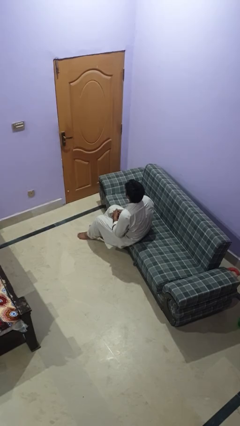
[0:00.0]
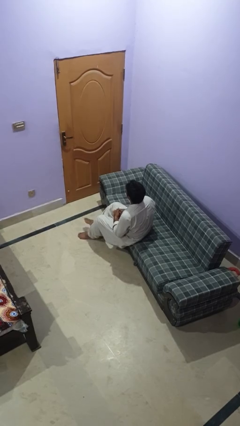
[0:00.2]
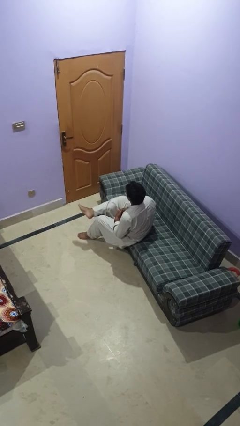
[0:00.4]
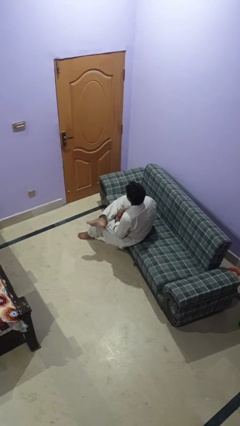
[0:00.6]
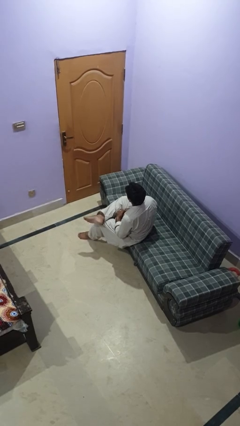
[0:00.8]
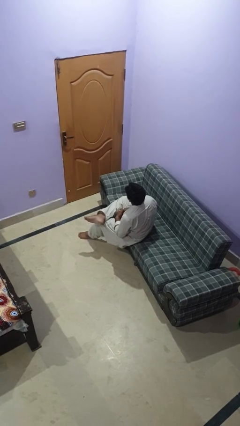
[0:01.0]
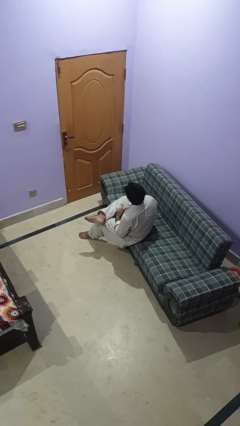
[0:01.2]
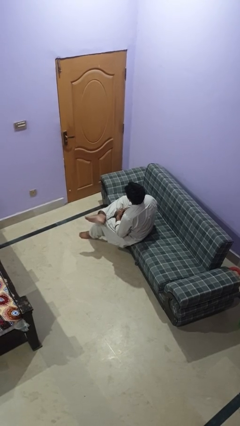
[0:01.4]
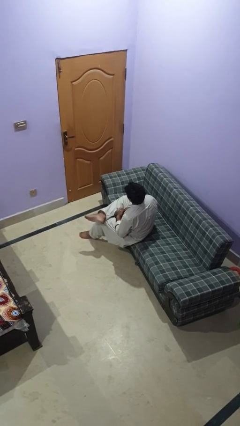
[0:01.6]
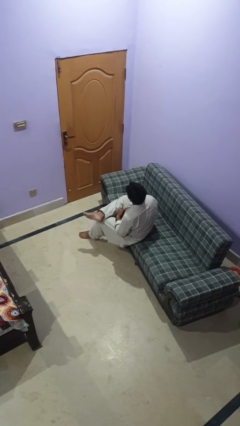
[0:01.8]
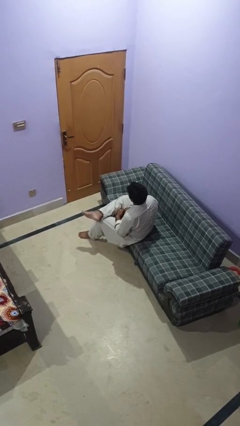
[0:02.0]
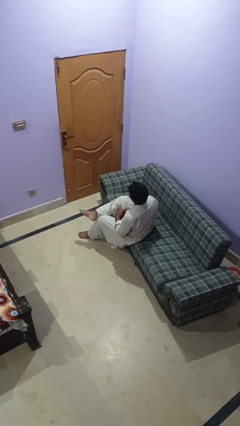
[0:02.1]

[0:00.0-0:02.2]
person crosses legs

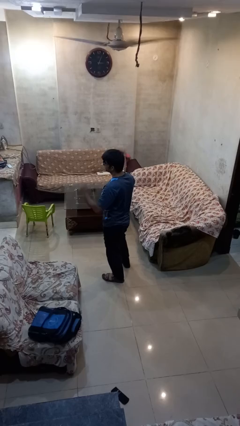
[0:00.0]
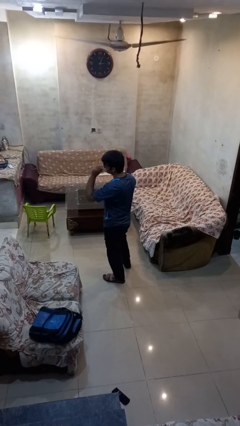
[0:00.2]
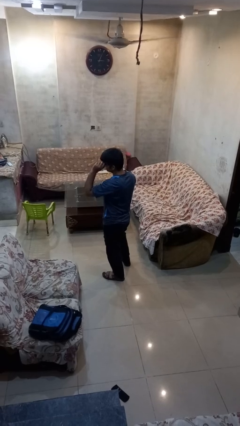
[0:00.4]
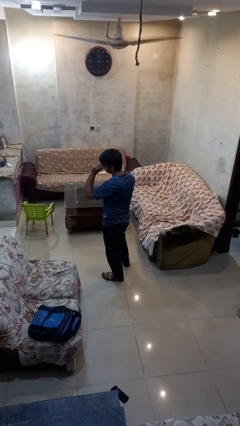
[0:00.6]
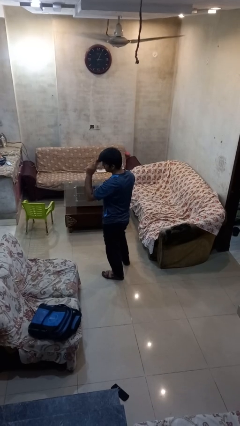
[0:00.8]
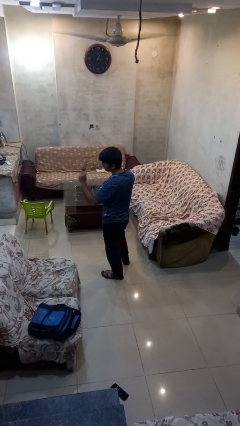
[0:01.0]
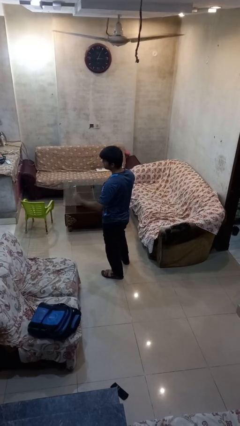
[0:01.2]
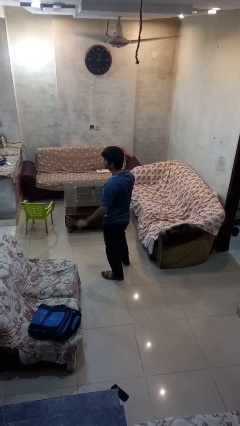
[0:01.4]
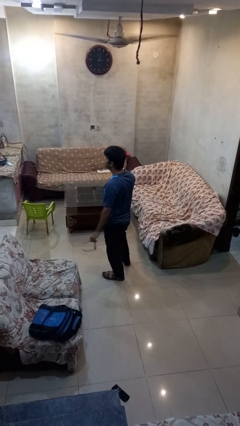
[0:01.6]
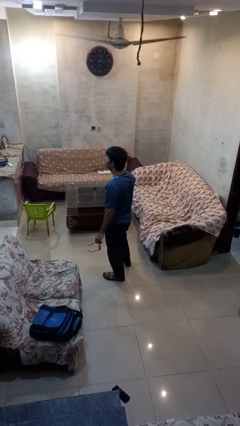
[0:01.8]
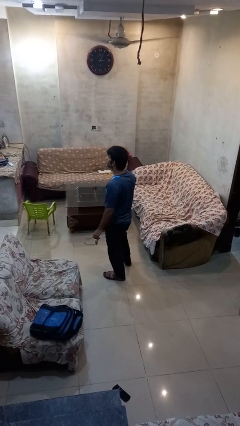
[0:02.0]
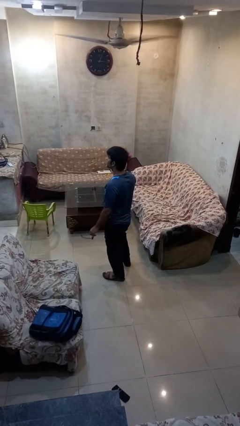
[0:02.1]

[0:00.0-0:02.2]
person takes off sunglasses

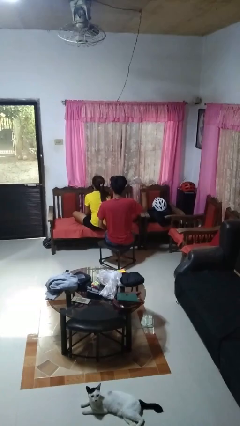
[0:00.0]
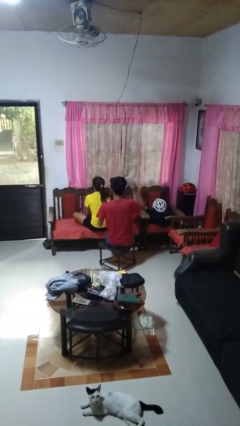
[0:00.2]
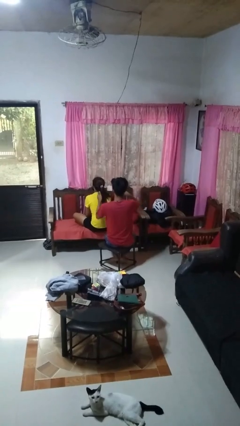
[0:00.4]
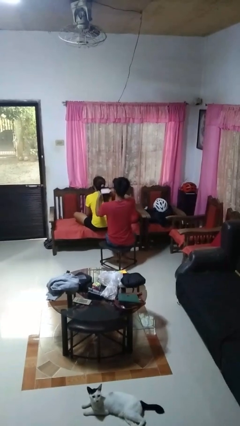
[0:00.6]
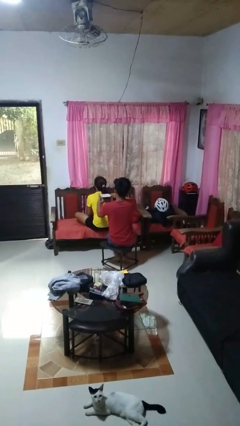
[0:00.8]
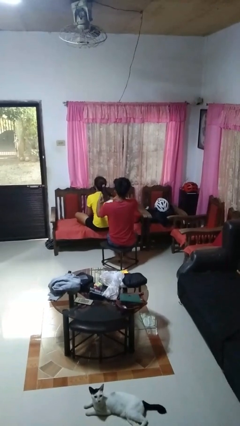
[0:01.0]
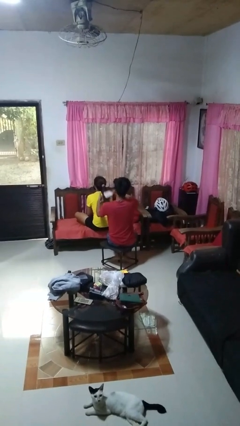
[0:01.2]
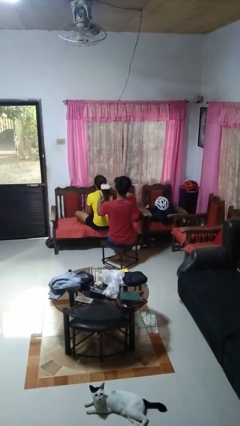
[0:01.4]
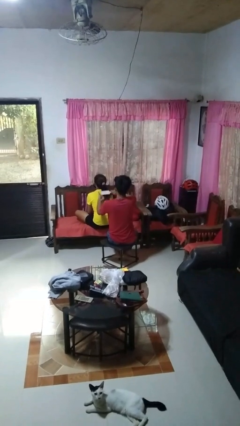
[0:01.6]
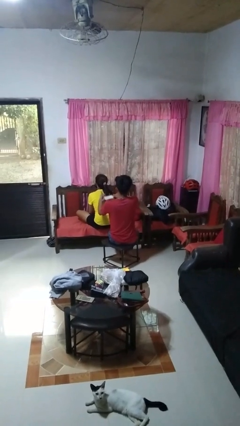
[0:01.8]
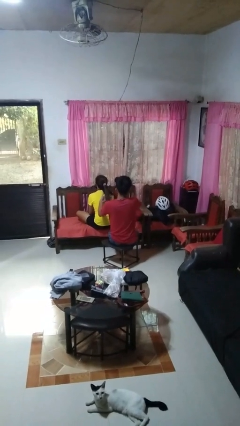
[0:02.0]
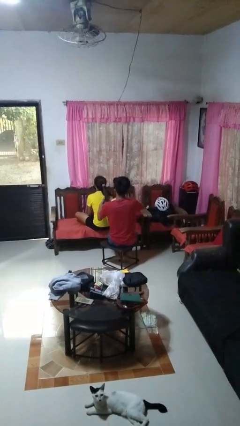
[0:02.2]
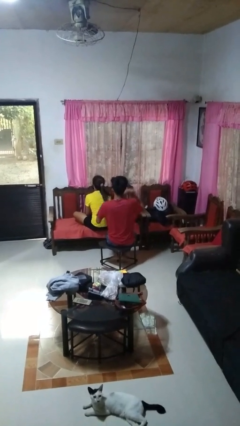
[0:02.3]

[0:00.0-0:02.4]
person brushes hair of person

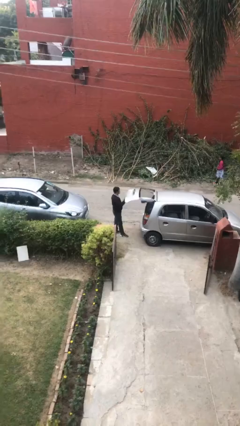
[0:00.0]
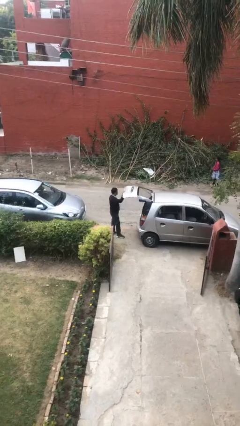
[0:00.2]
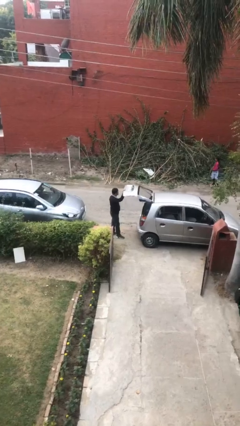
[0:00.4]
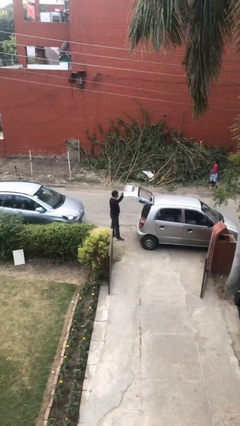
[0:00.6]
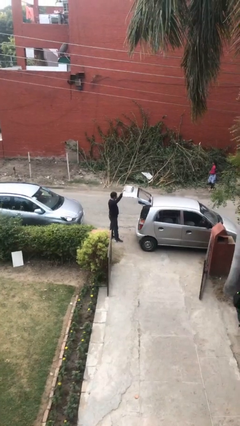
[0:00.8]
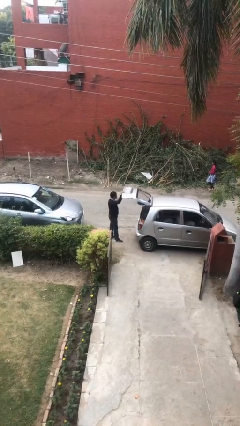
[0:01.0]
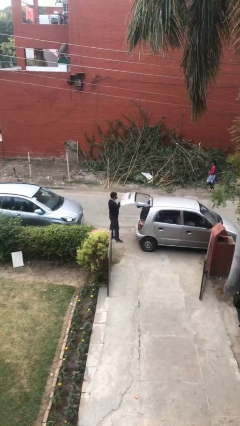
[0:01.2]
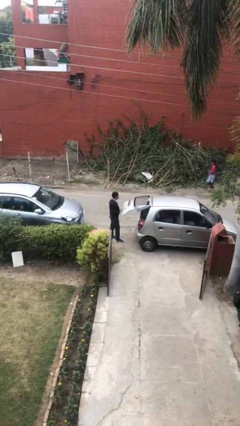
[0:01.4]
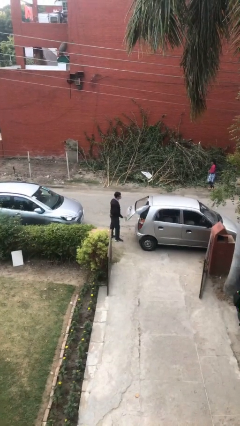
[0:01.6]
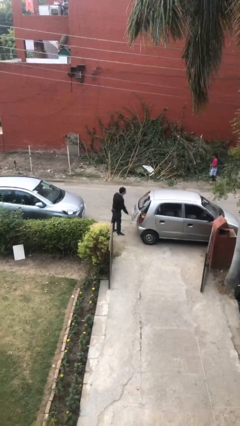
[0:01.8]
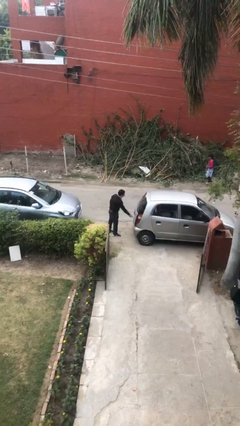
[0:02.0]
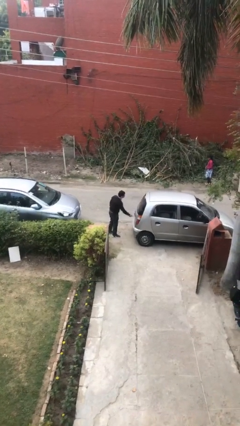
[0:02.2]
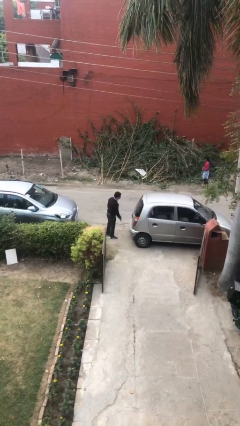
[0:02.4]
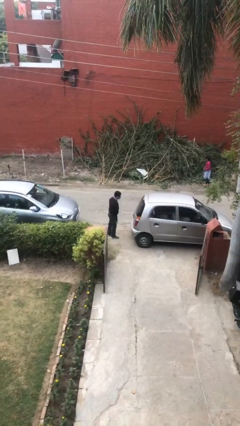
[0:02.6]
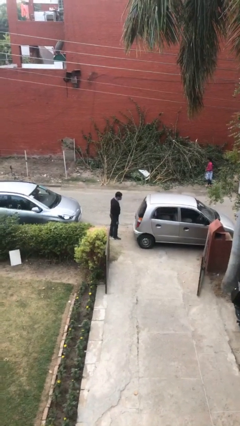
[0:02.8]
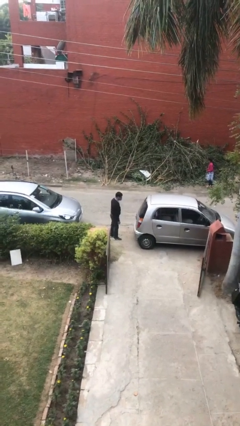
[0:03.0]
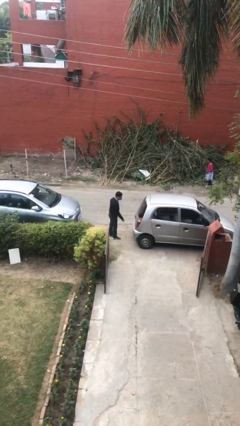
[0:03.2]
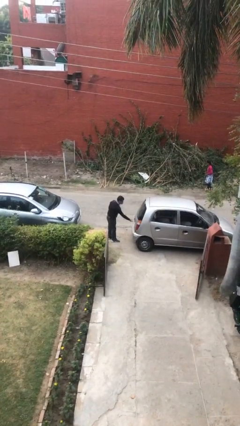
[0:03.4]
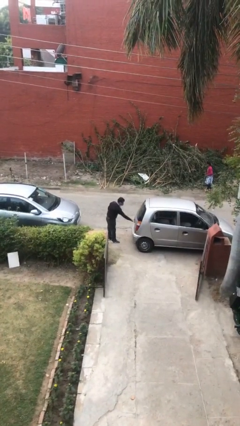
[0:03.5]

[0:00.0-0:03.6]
person closes car trunk

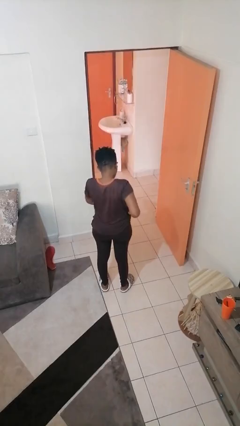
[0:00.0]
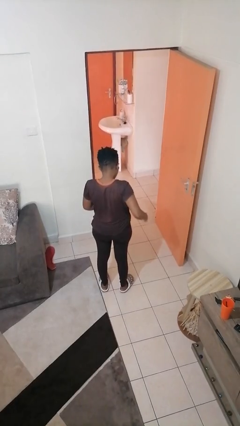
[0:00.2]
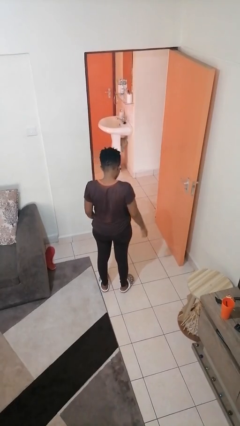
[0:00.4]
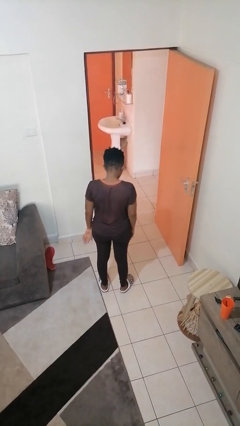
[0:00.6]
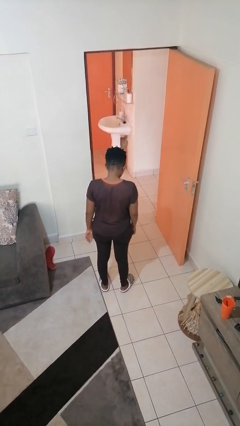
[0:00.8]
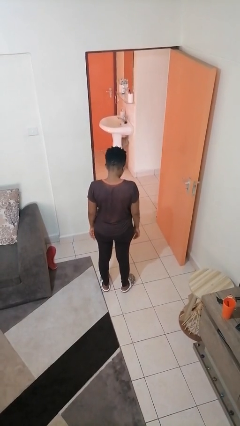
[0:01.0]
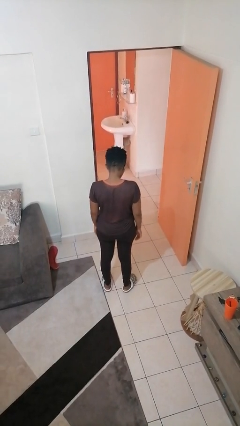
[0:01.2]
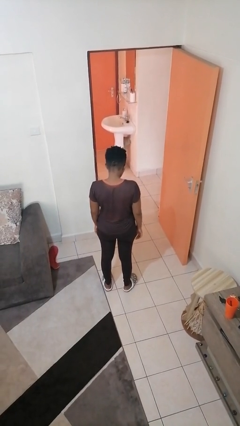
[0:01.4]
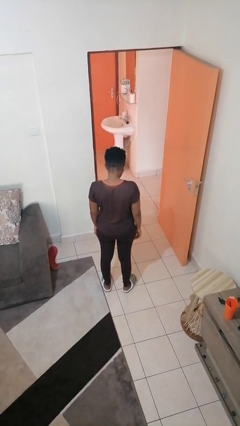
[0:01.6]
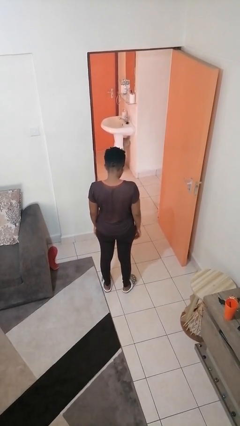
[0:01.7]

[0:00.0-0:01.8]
person puts phone into pocket

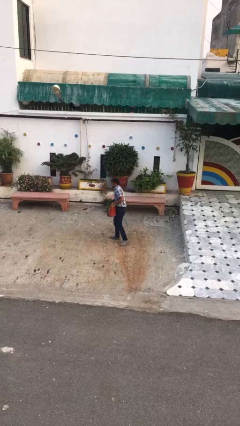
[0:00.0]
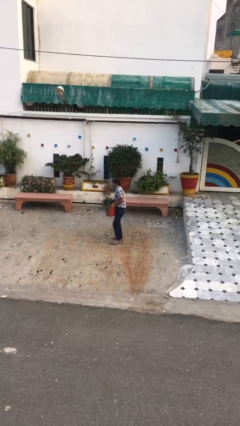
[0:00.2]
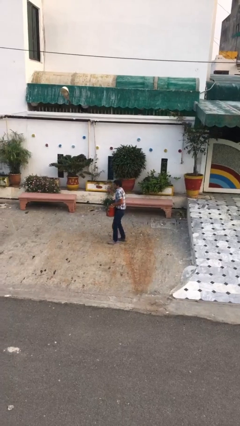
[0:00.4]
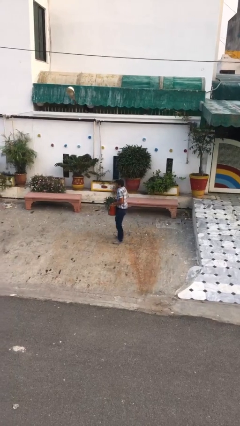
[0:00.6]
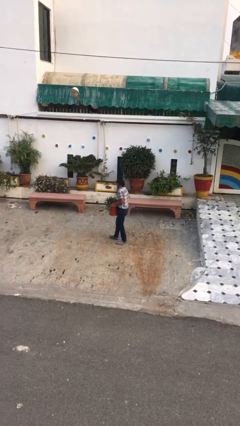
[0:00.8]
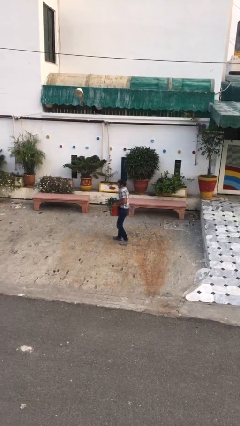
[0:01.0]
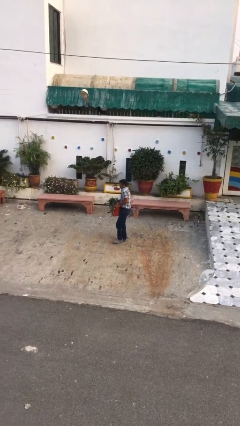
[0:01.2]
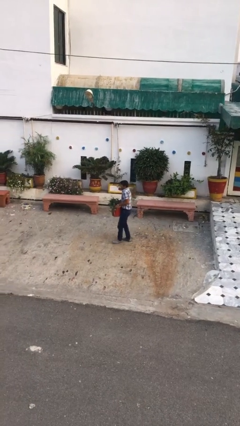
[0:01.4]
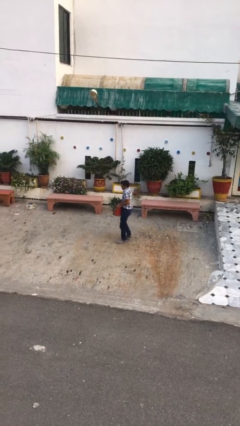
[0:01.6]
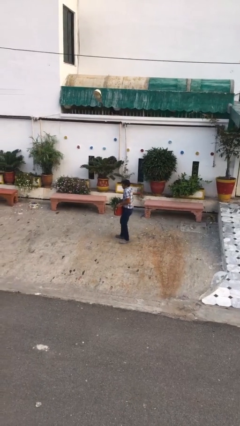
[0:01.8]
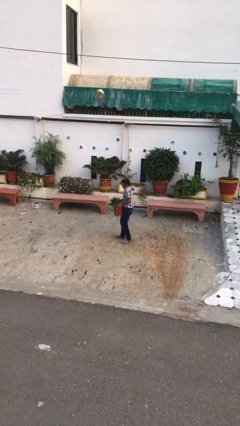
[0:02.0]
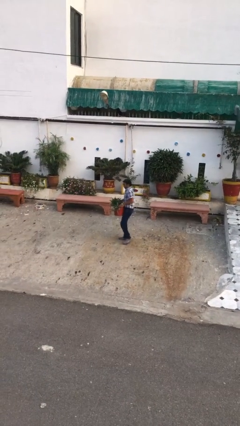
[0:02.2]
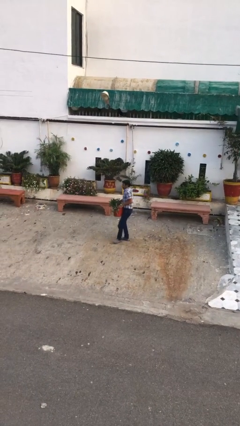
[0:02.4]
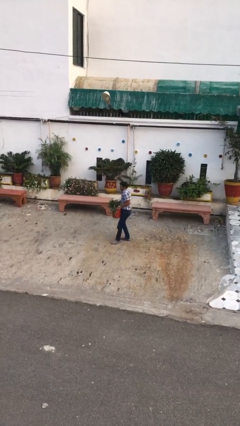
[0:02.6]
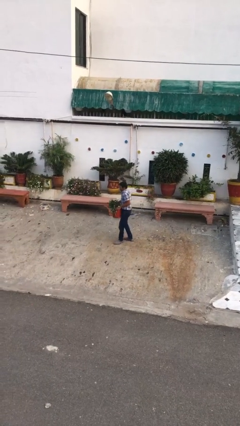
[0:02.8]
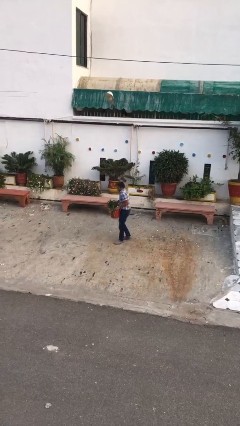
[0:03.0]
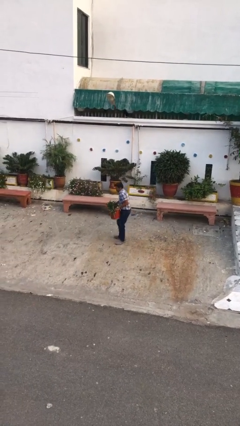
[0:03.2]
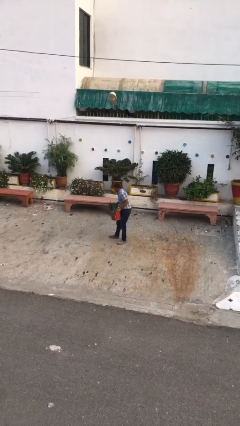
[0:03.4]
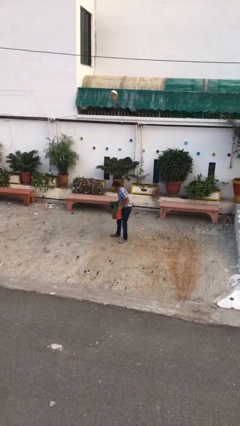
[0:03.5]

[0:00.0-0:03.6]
person carries heavy object

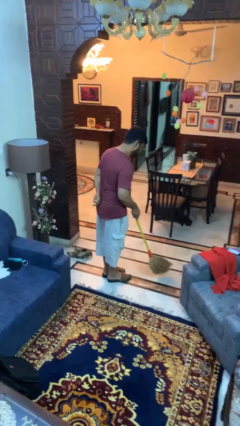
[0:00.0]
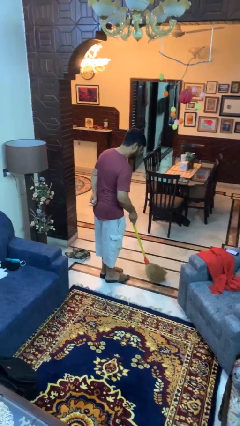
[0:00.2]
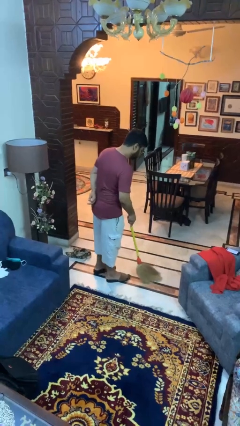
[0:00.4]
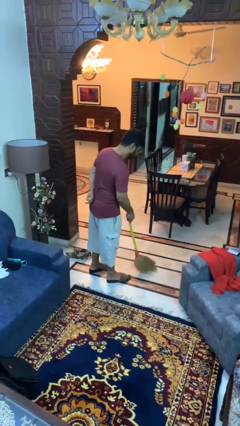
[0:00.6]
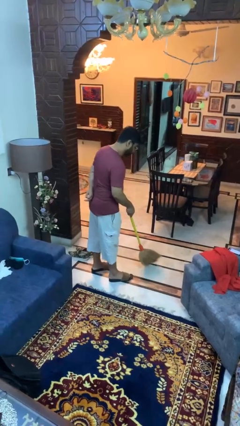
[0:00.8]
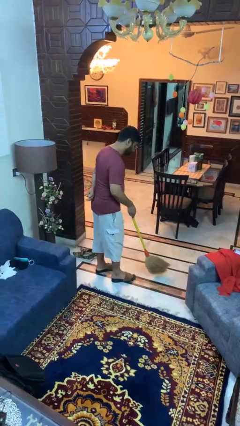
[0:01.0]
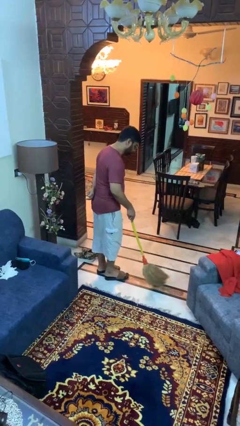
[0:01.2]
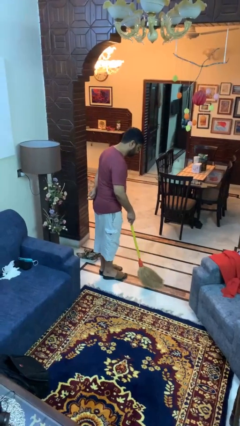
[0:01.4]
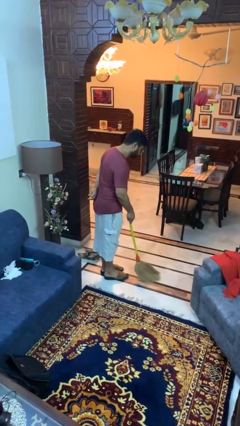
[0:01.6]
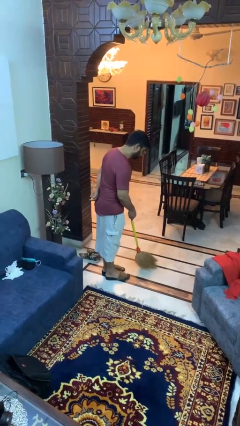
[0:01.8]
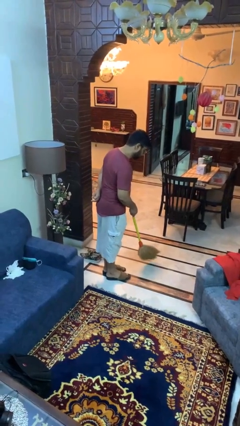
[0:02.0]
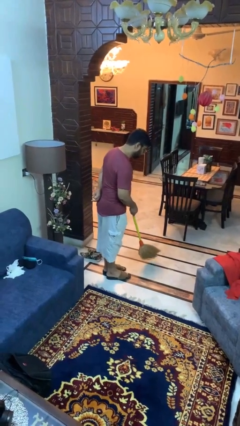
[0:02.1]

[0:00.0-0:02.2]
person sweeps floor
